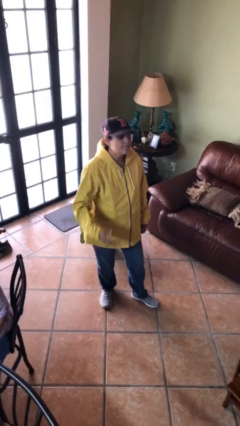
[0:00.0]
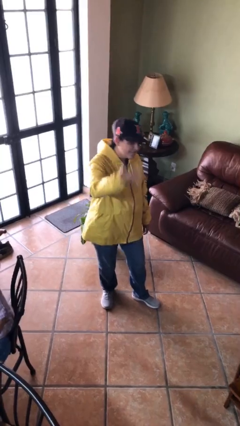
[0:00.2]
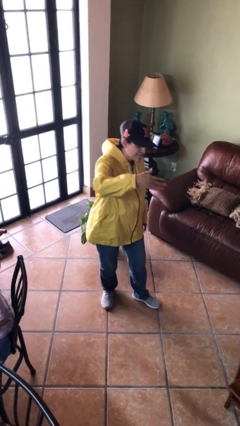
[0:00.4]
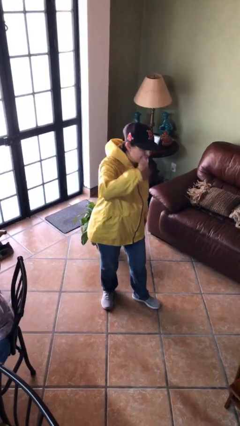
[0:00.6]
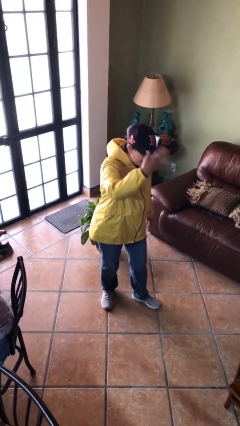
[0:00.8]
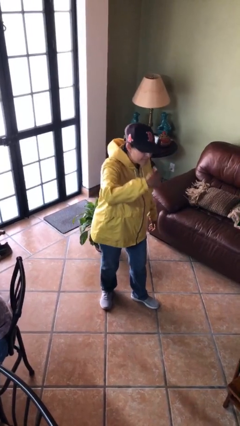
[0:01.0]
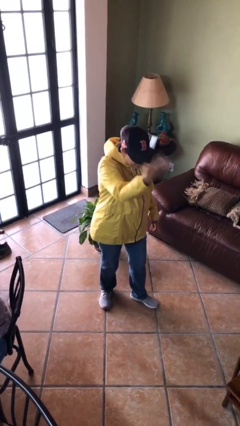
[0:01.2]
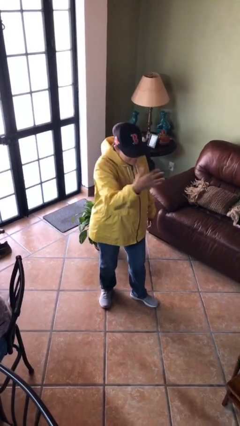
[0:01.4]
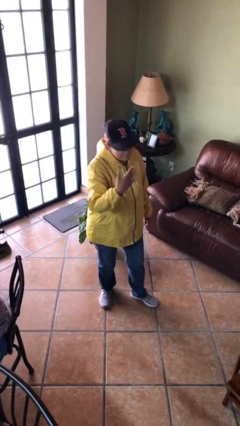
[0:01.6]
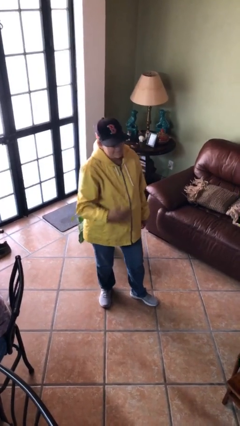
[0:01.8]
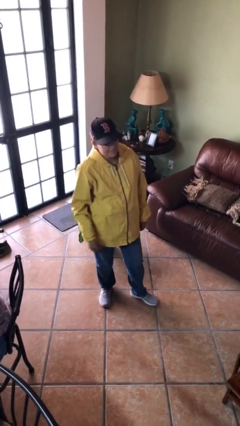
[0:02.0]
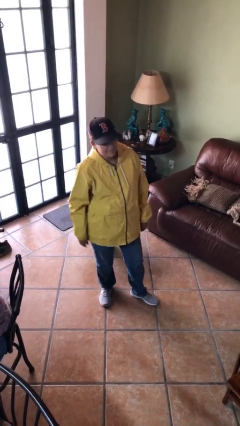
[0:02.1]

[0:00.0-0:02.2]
person gestures come here

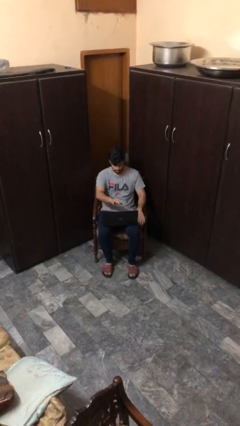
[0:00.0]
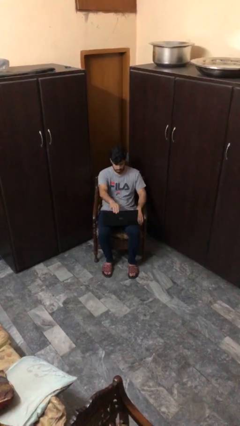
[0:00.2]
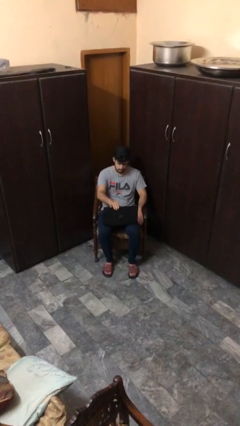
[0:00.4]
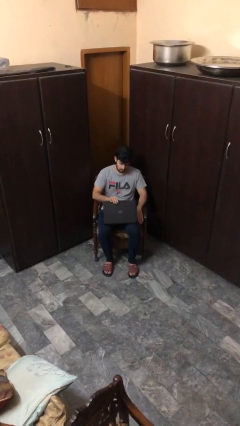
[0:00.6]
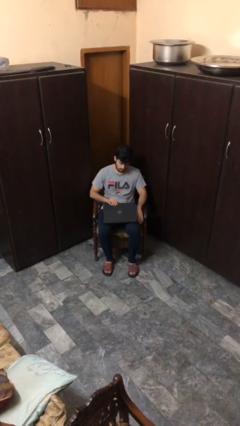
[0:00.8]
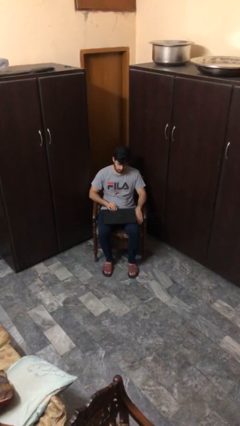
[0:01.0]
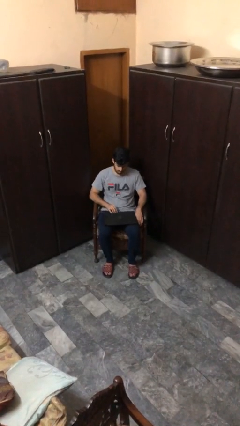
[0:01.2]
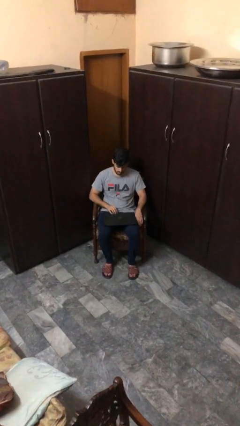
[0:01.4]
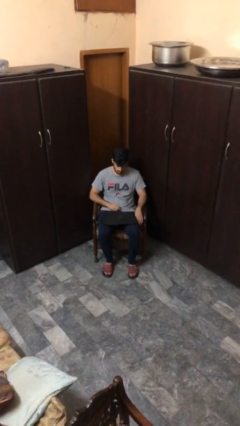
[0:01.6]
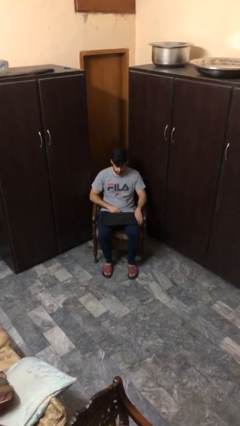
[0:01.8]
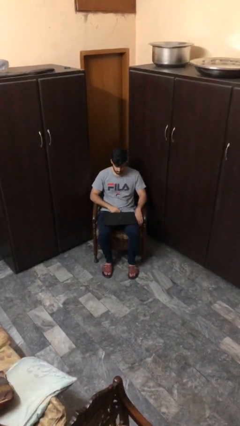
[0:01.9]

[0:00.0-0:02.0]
person closes laptop

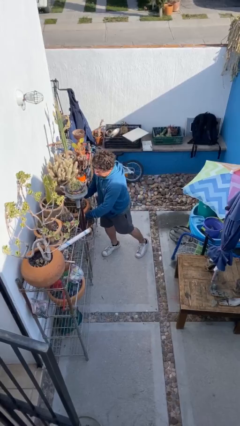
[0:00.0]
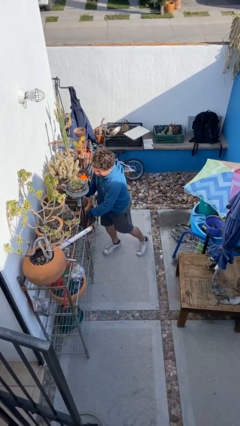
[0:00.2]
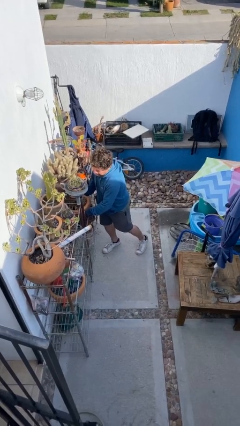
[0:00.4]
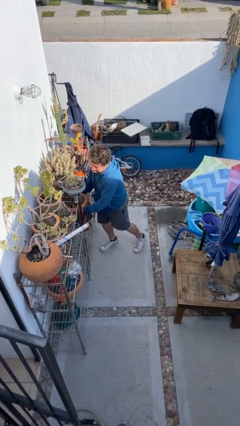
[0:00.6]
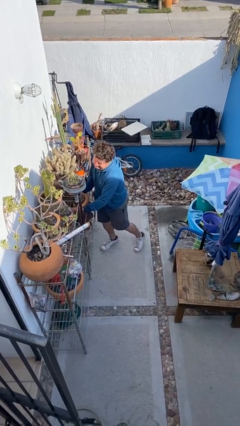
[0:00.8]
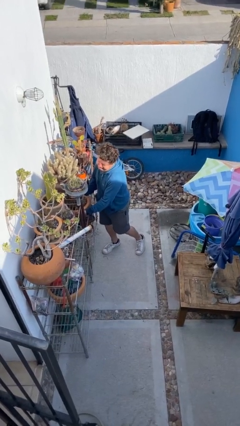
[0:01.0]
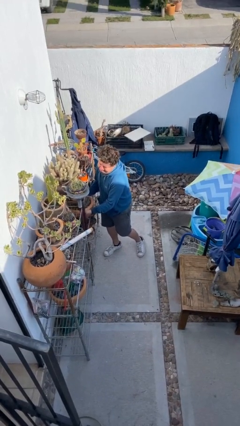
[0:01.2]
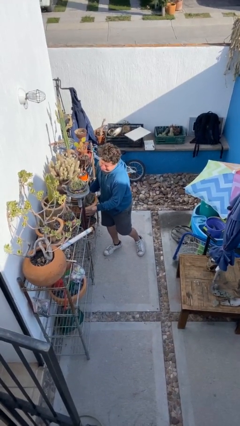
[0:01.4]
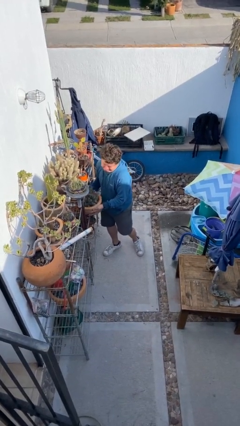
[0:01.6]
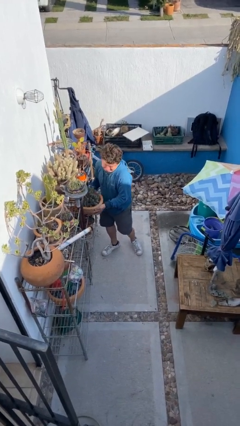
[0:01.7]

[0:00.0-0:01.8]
person picks up object from shelf

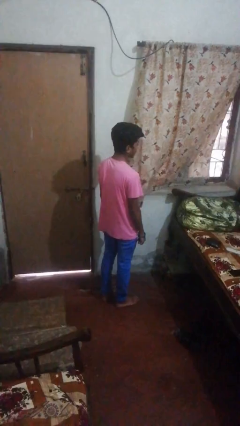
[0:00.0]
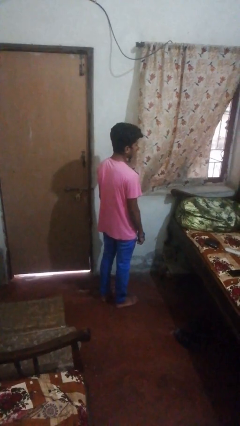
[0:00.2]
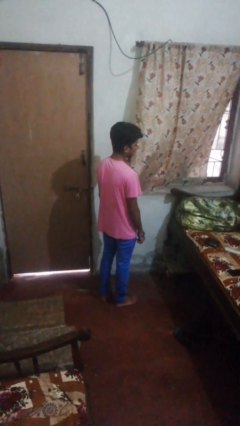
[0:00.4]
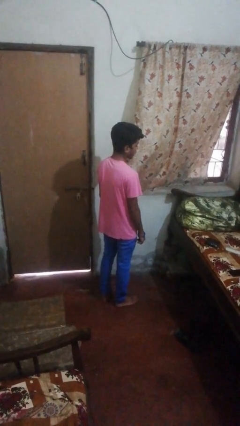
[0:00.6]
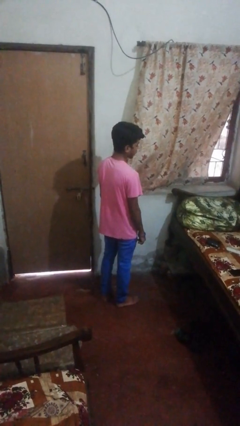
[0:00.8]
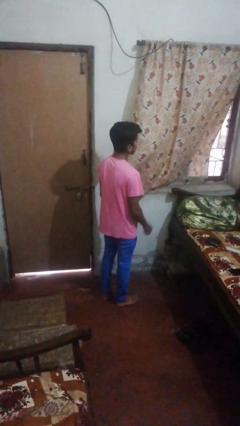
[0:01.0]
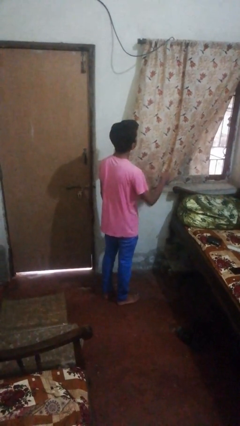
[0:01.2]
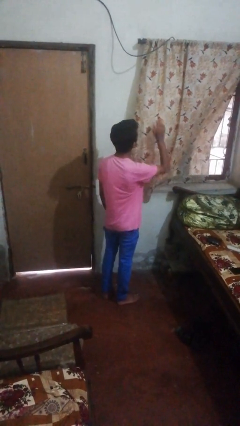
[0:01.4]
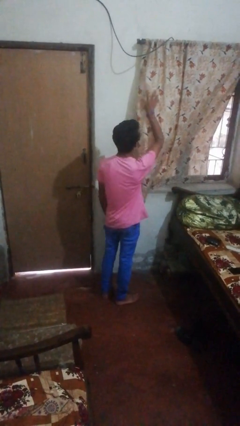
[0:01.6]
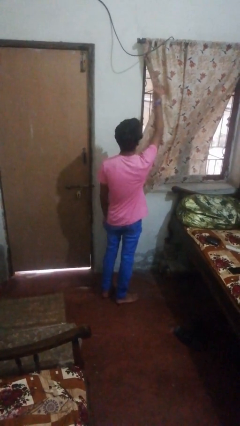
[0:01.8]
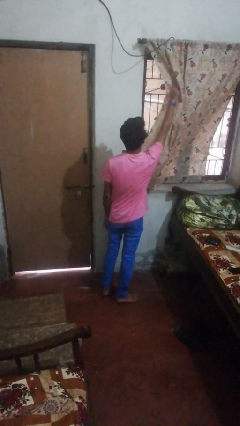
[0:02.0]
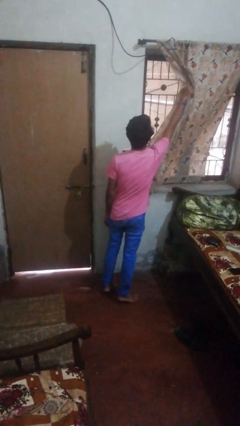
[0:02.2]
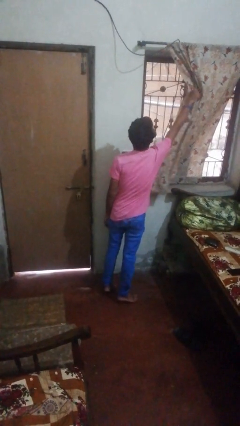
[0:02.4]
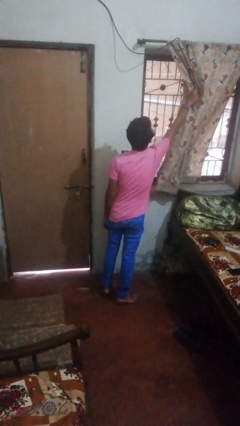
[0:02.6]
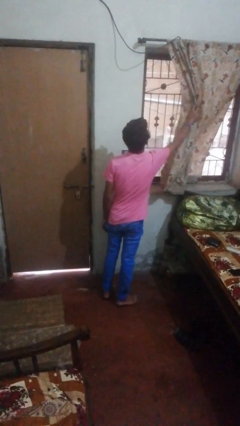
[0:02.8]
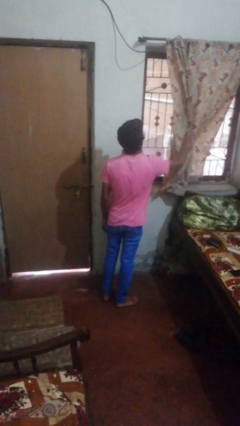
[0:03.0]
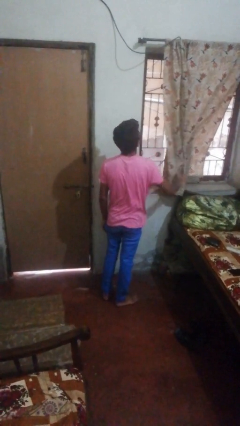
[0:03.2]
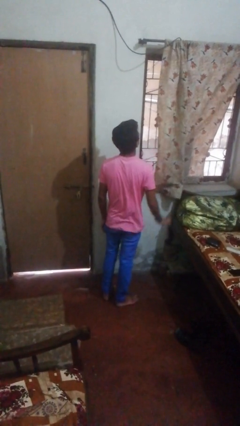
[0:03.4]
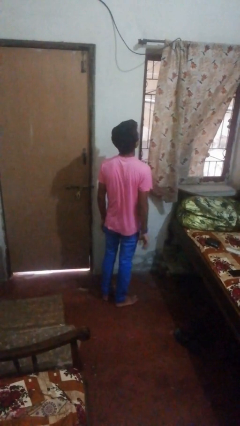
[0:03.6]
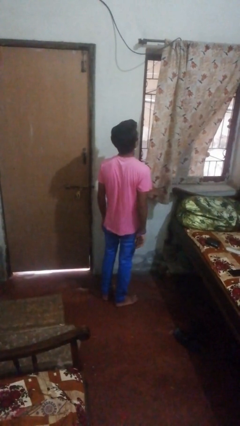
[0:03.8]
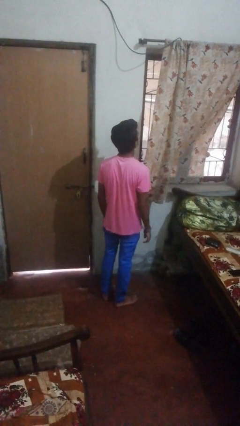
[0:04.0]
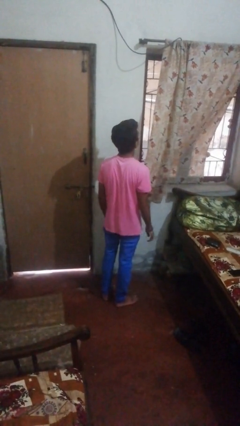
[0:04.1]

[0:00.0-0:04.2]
person opens curtains

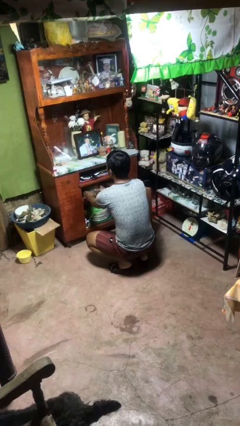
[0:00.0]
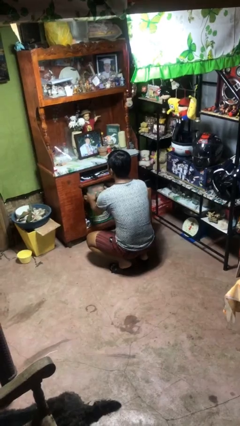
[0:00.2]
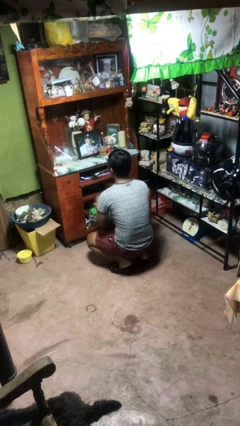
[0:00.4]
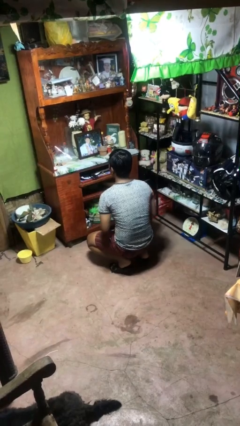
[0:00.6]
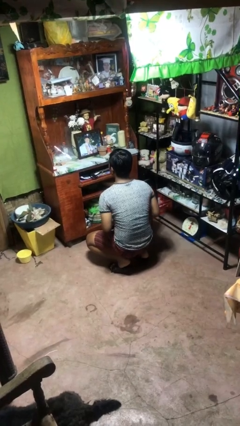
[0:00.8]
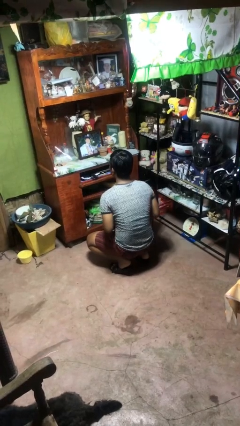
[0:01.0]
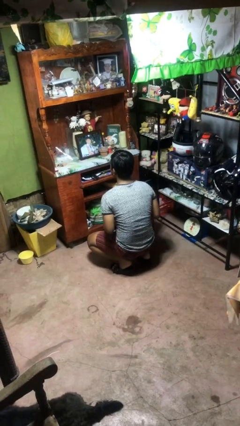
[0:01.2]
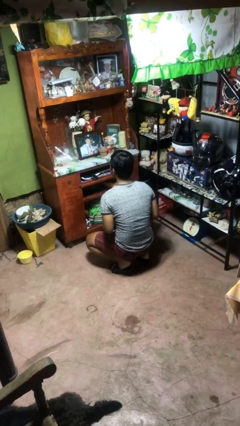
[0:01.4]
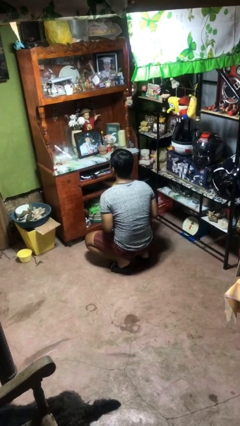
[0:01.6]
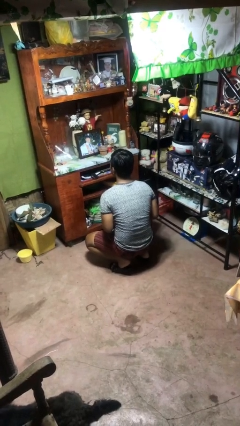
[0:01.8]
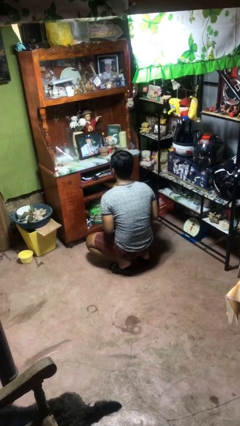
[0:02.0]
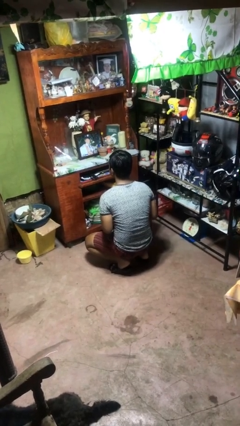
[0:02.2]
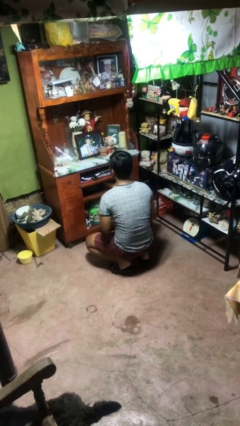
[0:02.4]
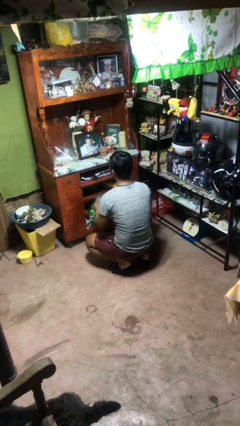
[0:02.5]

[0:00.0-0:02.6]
person picks up object from cabinet

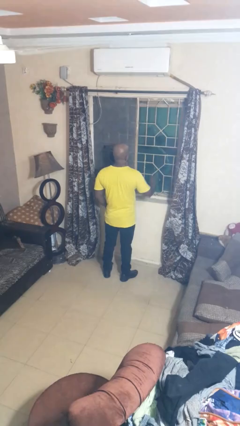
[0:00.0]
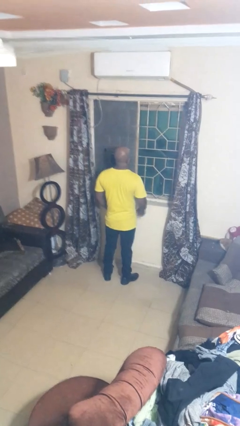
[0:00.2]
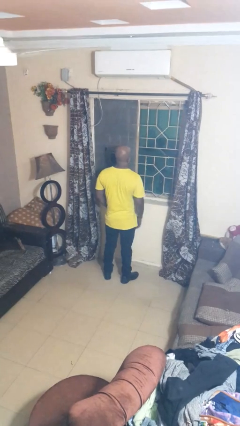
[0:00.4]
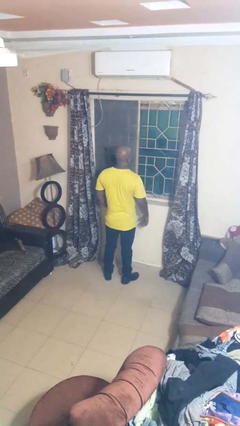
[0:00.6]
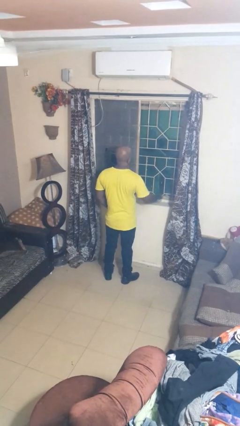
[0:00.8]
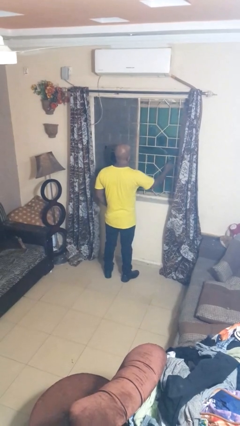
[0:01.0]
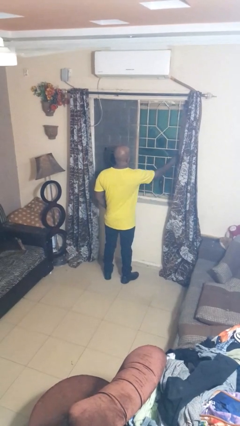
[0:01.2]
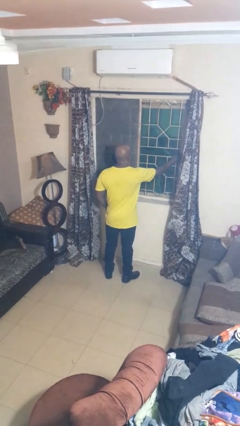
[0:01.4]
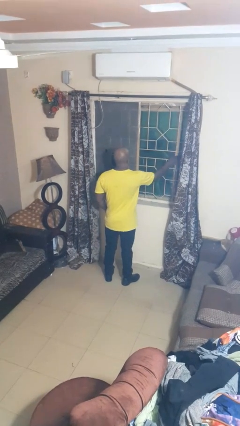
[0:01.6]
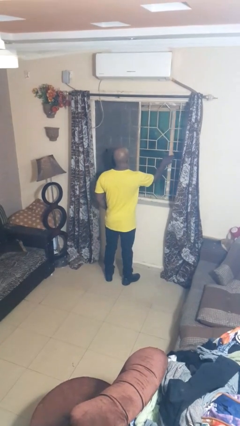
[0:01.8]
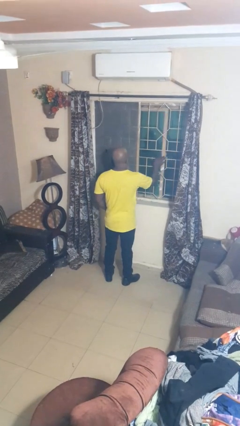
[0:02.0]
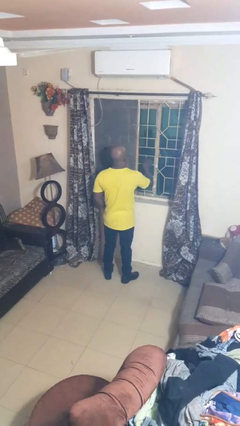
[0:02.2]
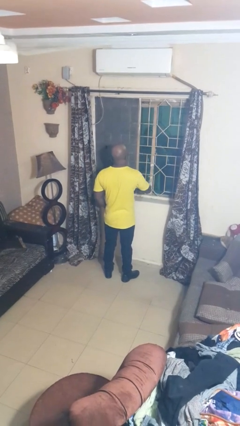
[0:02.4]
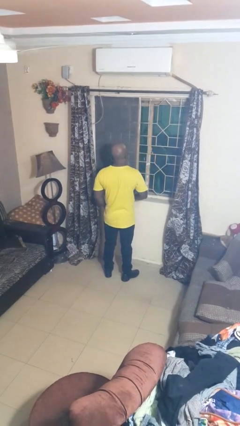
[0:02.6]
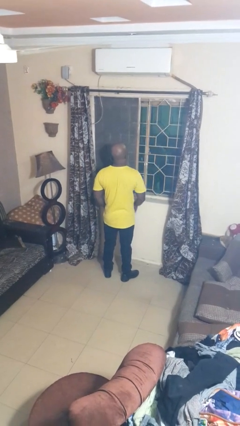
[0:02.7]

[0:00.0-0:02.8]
person closes home window

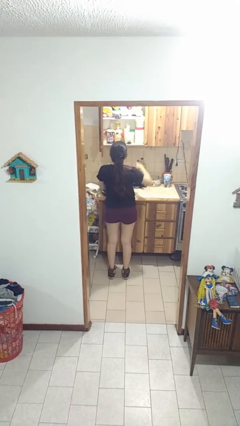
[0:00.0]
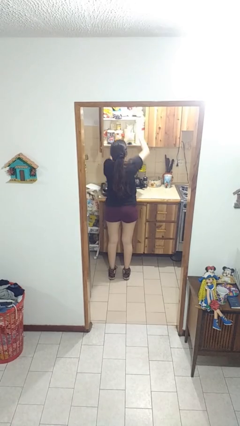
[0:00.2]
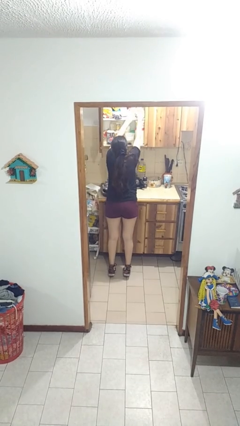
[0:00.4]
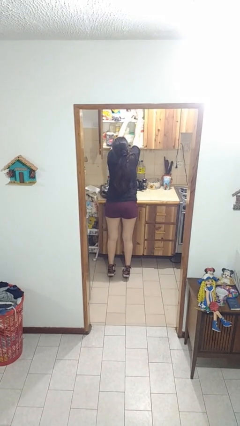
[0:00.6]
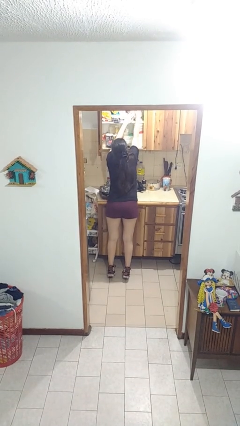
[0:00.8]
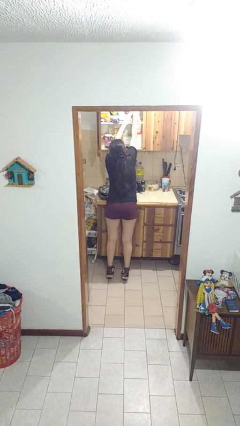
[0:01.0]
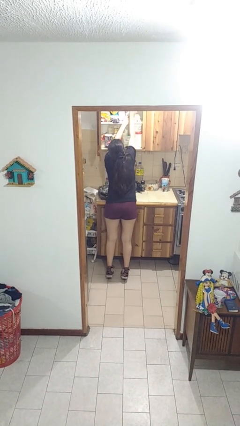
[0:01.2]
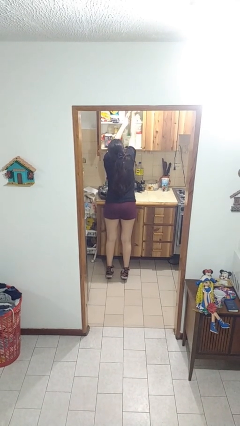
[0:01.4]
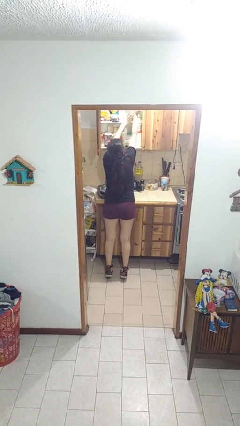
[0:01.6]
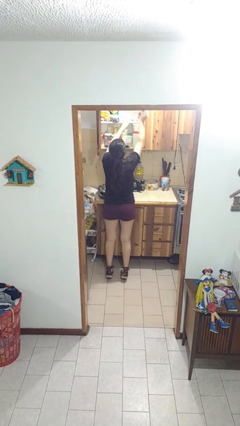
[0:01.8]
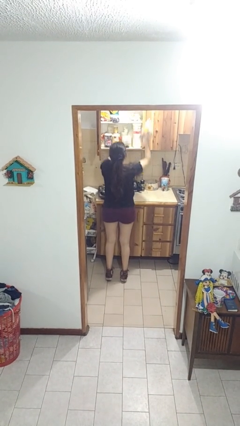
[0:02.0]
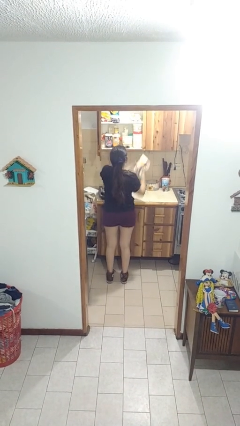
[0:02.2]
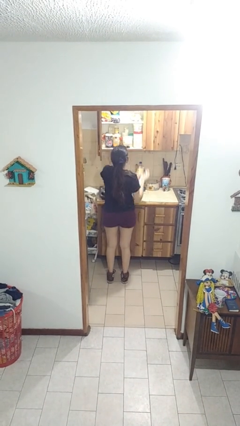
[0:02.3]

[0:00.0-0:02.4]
person takes object from cabinet
